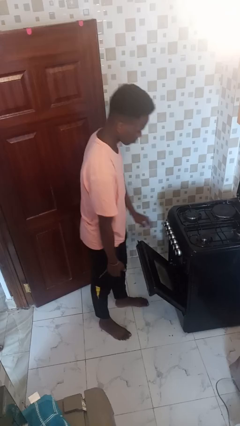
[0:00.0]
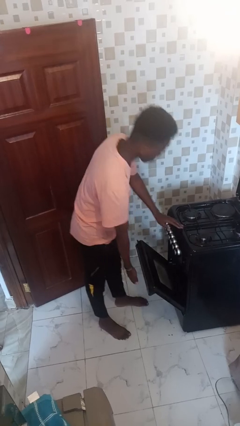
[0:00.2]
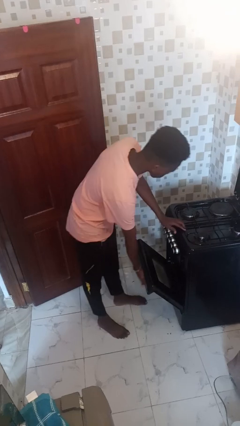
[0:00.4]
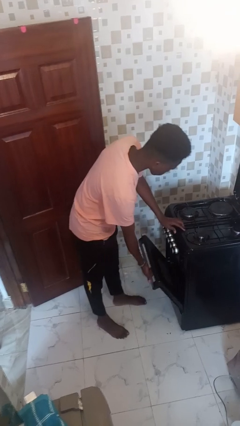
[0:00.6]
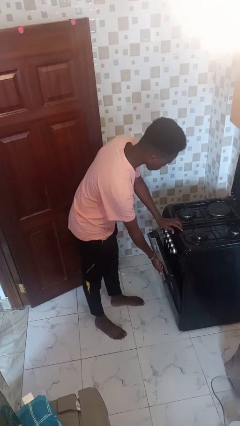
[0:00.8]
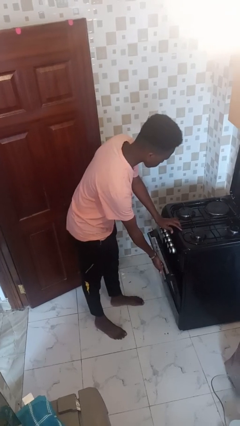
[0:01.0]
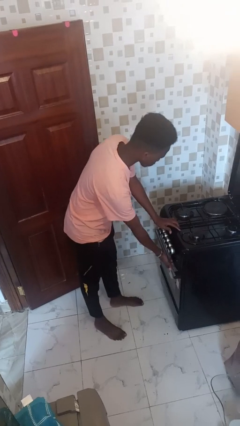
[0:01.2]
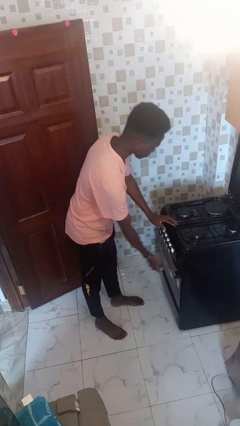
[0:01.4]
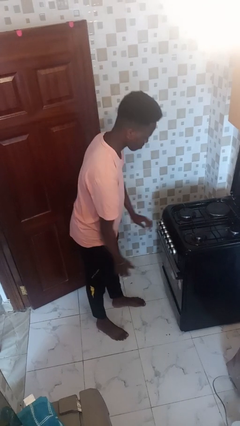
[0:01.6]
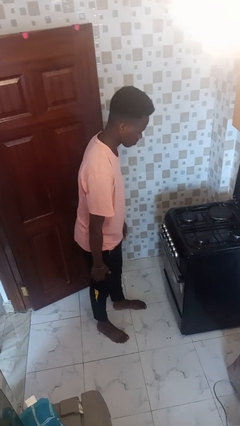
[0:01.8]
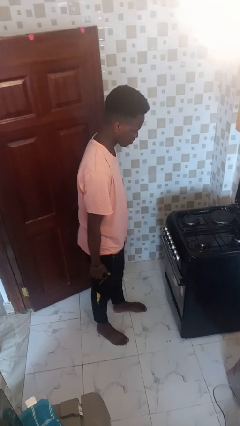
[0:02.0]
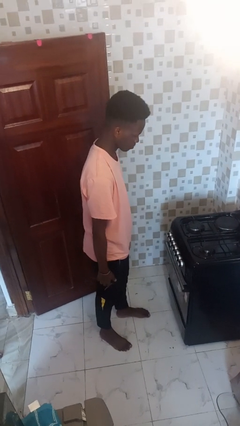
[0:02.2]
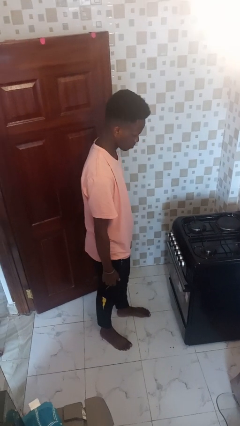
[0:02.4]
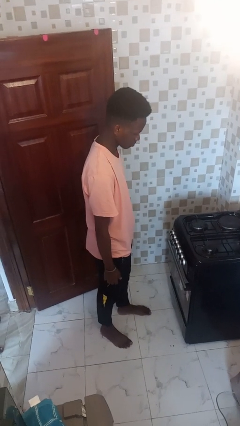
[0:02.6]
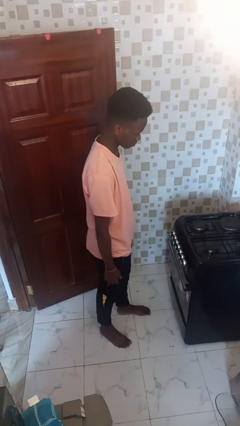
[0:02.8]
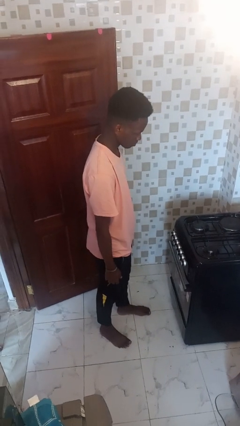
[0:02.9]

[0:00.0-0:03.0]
person closes oven door

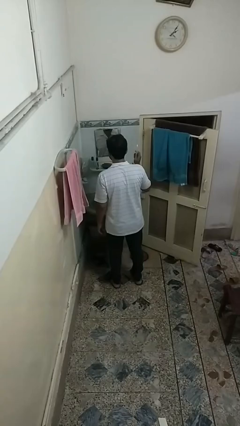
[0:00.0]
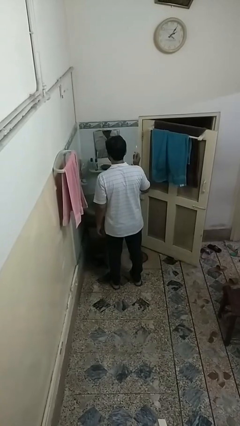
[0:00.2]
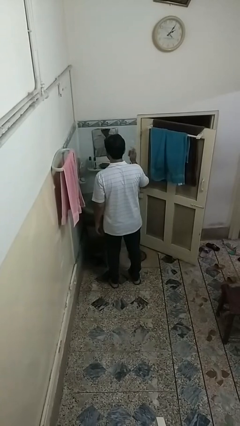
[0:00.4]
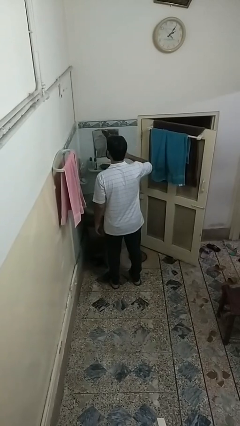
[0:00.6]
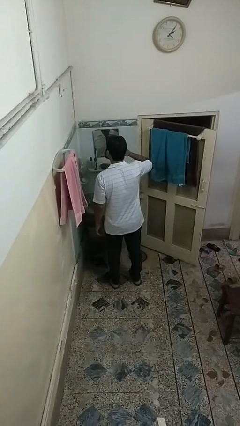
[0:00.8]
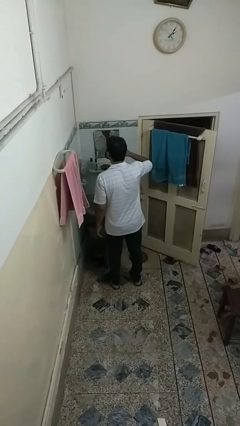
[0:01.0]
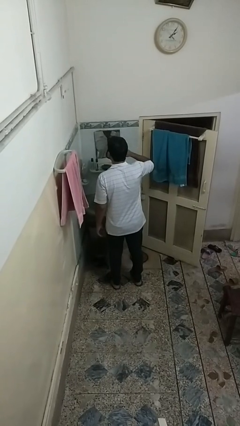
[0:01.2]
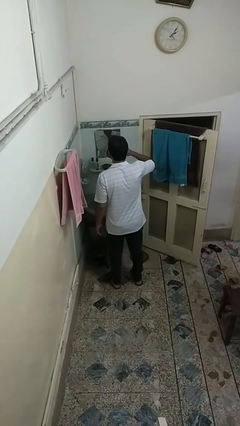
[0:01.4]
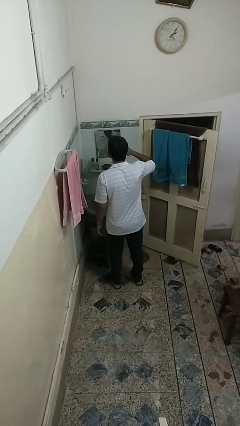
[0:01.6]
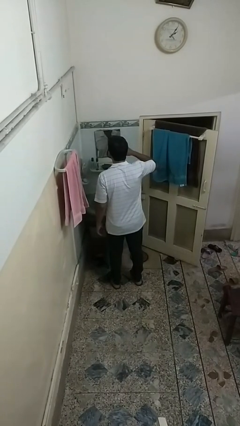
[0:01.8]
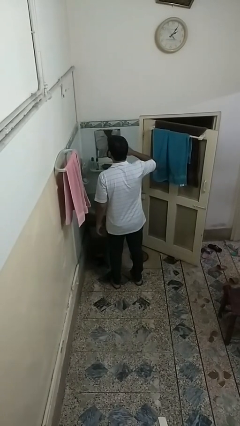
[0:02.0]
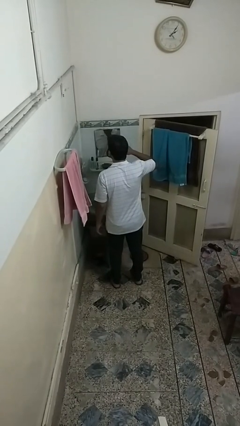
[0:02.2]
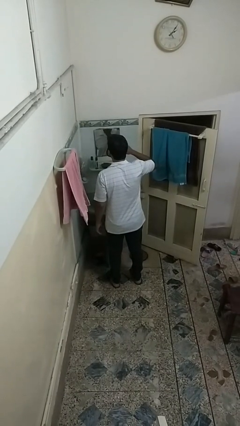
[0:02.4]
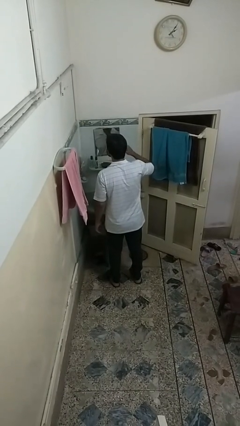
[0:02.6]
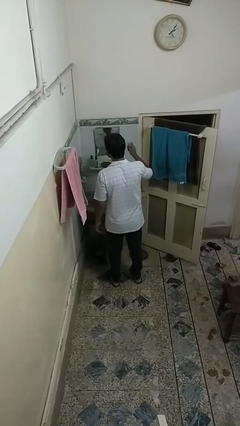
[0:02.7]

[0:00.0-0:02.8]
person brushes teeth

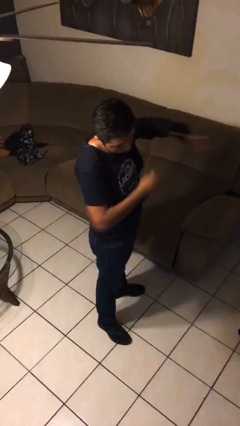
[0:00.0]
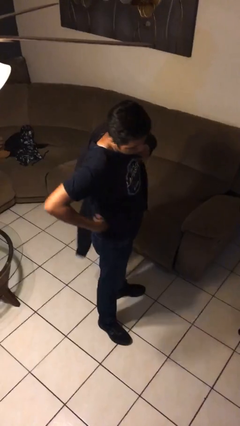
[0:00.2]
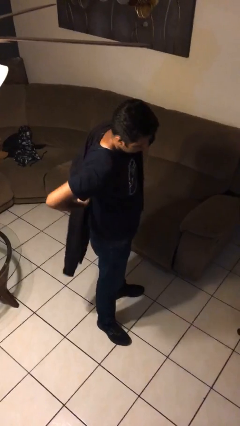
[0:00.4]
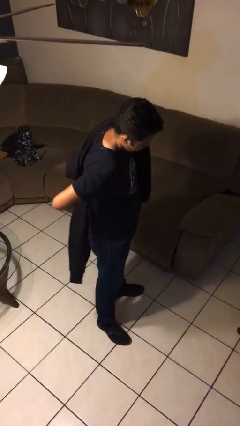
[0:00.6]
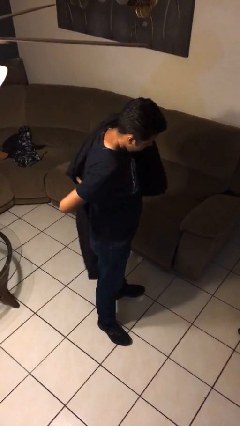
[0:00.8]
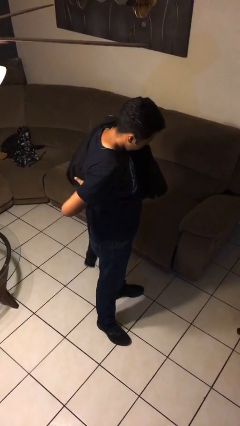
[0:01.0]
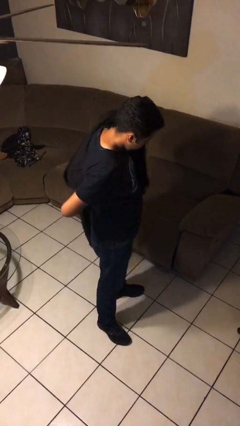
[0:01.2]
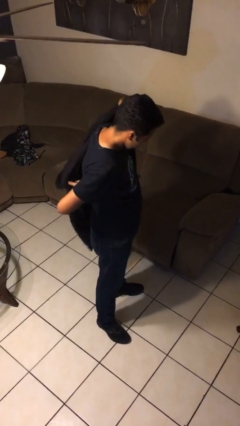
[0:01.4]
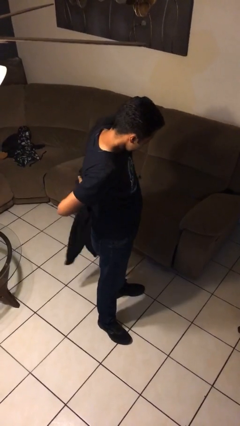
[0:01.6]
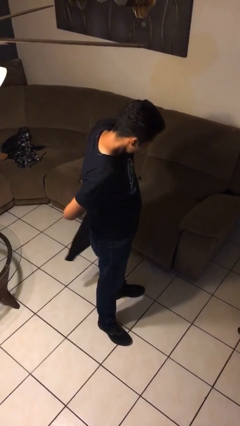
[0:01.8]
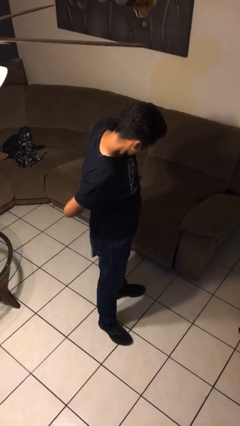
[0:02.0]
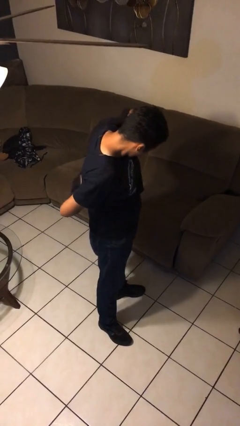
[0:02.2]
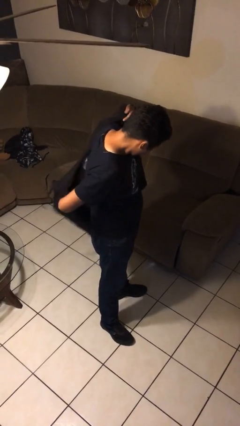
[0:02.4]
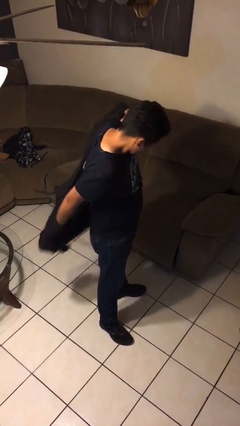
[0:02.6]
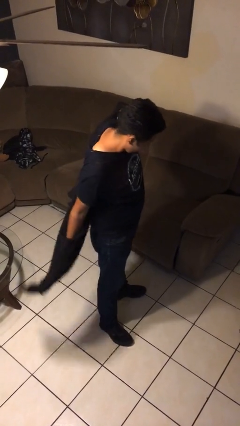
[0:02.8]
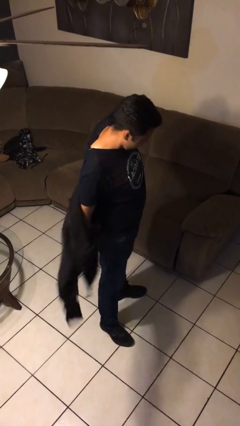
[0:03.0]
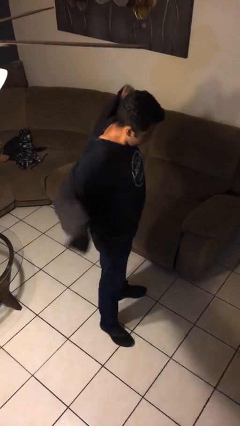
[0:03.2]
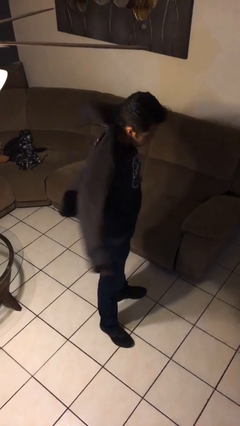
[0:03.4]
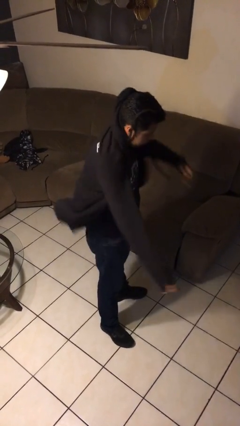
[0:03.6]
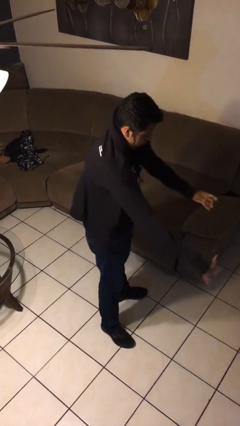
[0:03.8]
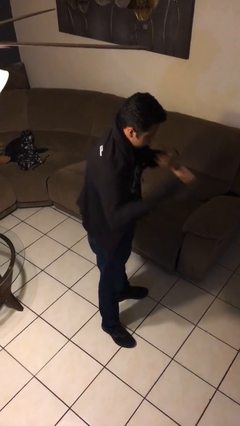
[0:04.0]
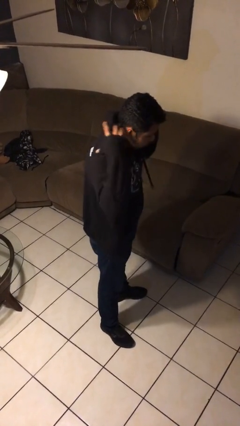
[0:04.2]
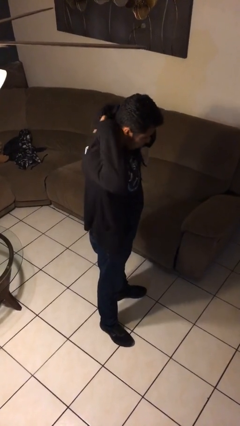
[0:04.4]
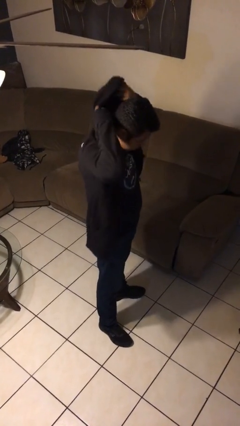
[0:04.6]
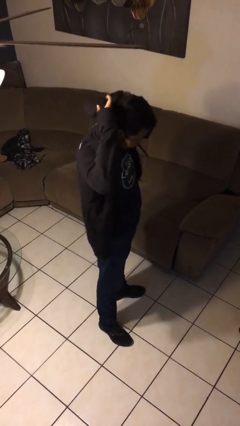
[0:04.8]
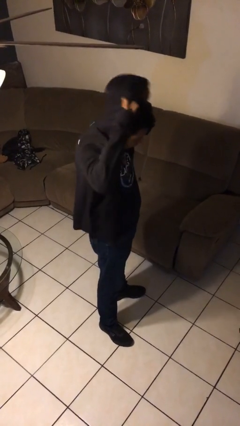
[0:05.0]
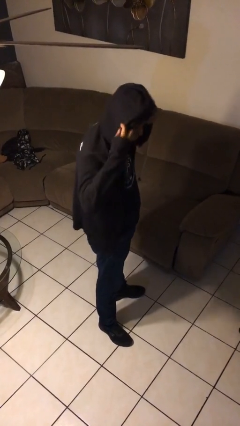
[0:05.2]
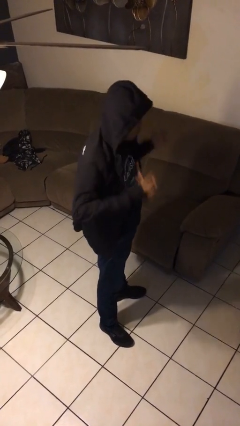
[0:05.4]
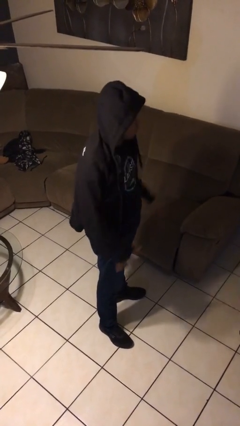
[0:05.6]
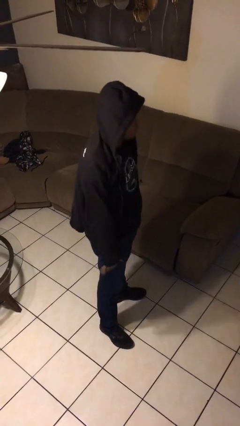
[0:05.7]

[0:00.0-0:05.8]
person puts on hoodie

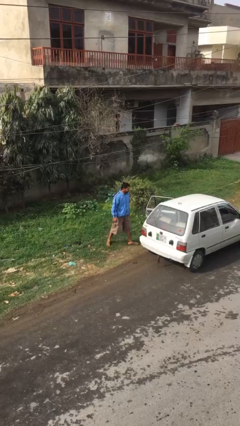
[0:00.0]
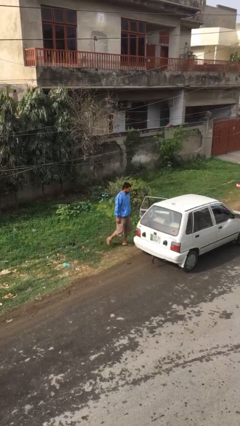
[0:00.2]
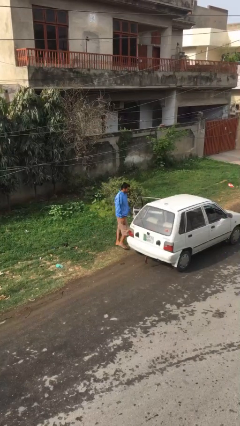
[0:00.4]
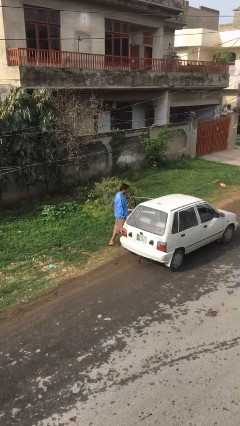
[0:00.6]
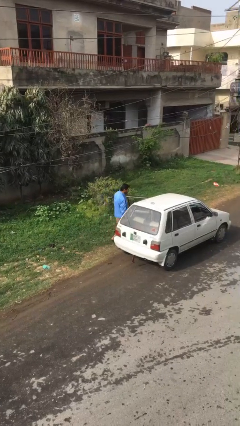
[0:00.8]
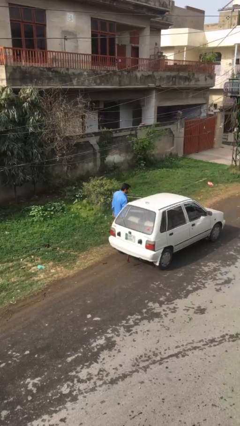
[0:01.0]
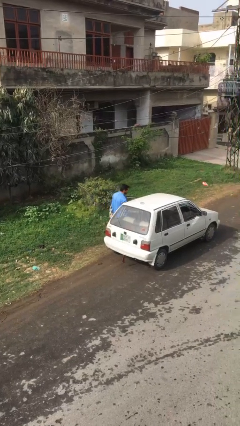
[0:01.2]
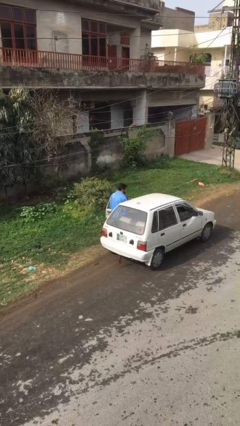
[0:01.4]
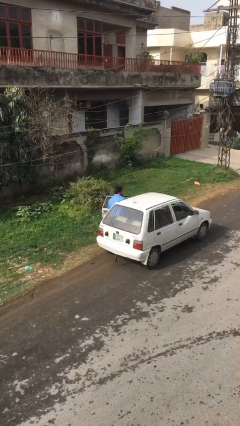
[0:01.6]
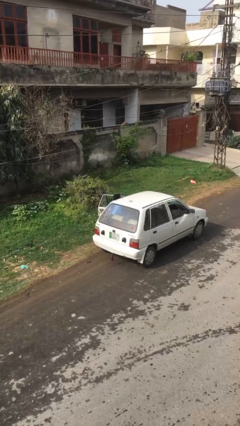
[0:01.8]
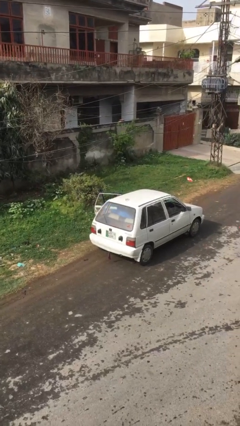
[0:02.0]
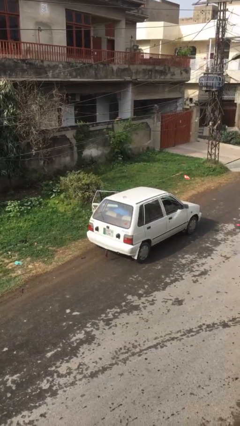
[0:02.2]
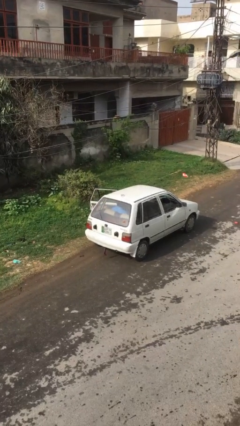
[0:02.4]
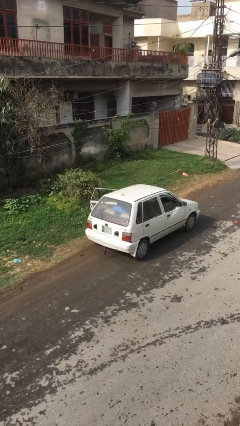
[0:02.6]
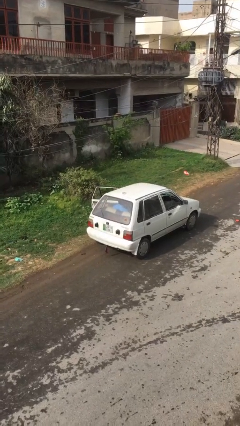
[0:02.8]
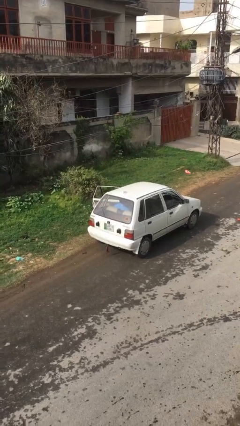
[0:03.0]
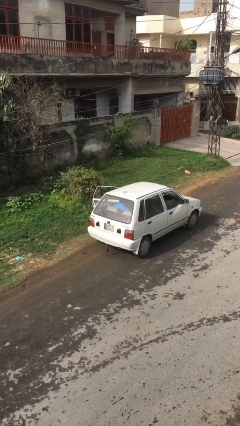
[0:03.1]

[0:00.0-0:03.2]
person enters car

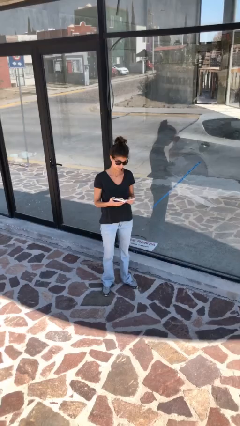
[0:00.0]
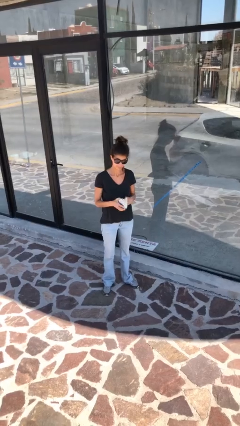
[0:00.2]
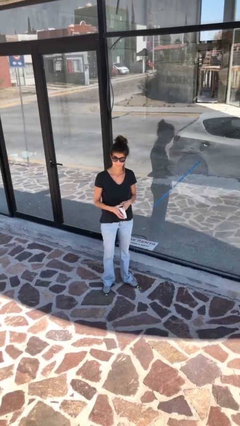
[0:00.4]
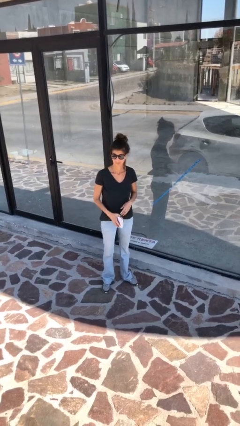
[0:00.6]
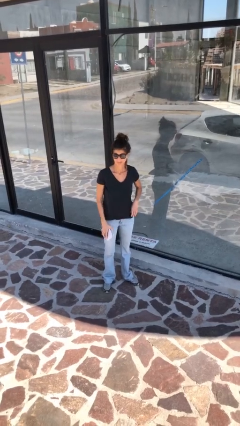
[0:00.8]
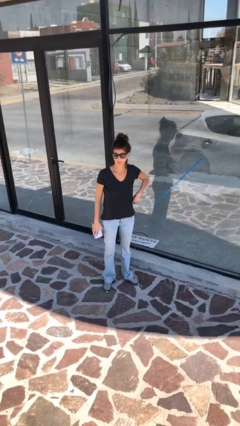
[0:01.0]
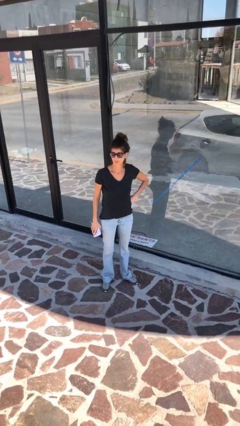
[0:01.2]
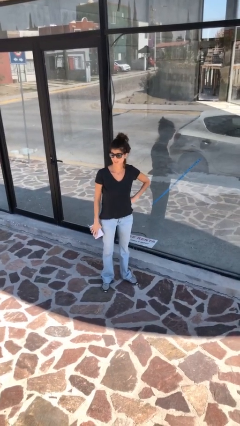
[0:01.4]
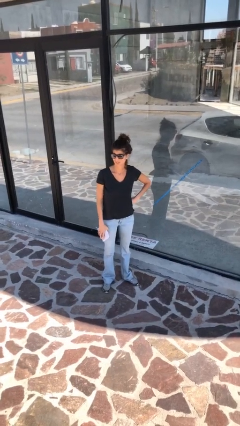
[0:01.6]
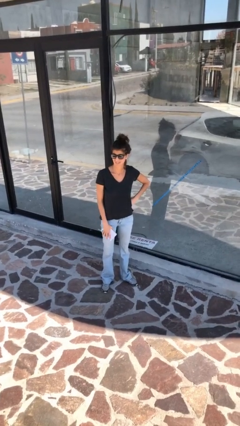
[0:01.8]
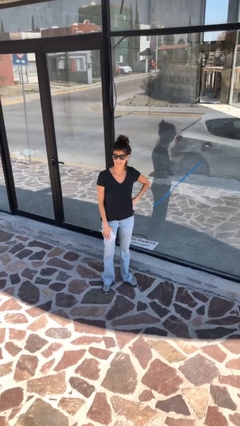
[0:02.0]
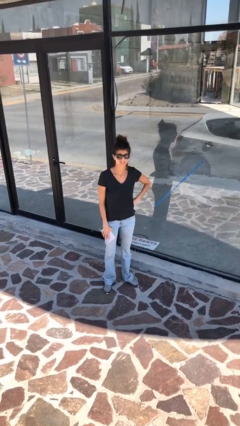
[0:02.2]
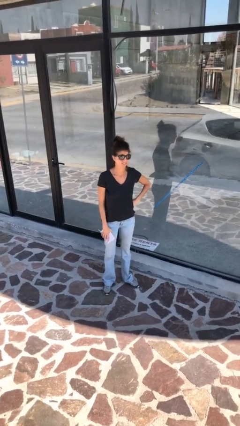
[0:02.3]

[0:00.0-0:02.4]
person reads document

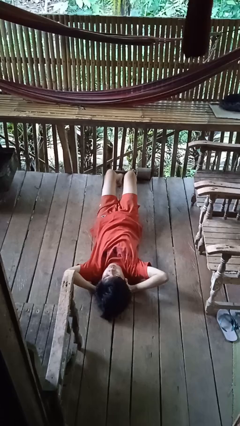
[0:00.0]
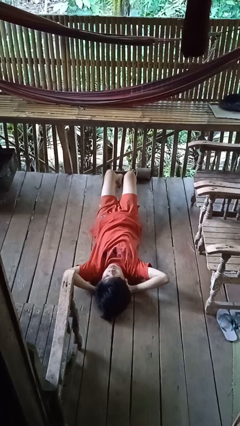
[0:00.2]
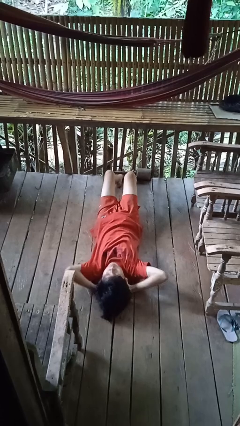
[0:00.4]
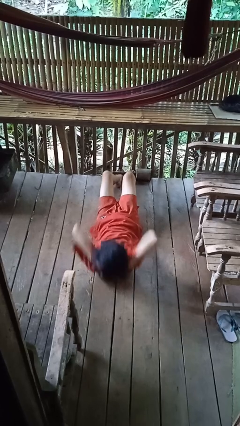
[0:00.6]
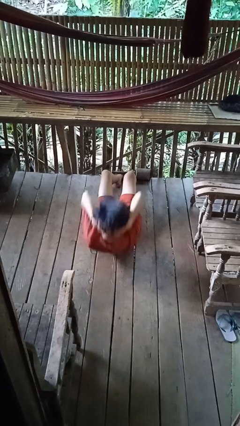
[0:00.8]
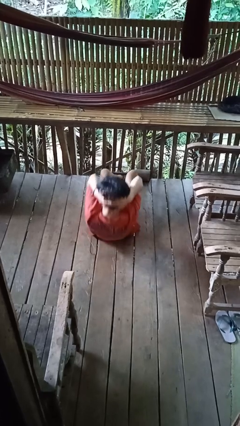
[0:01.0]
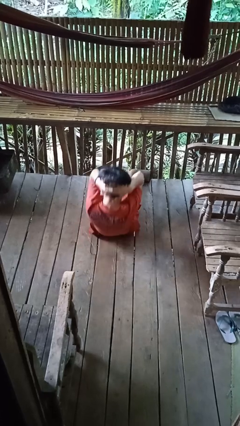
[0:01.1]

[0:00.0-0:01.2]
person exercises with situp
